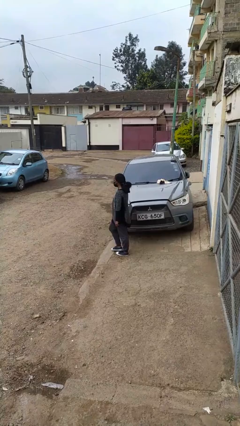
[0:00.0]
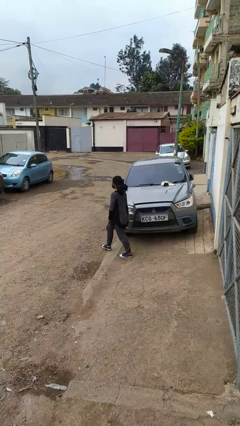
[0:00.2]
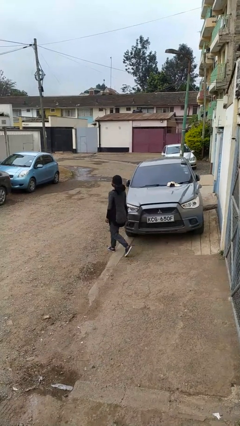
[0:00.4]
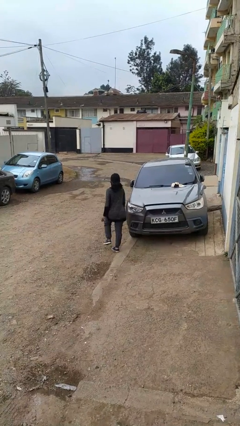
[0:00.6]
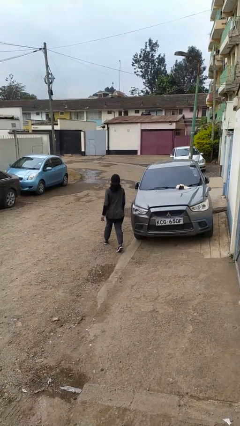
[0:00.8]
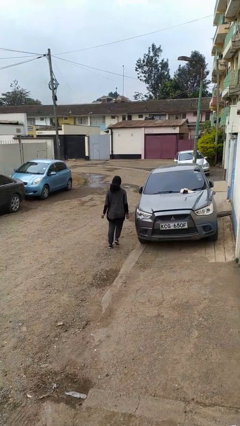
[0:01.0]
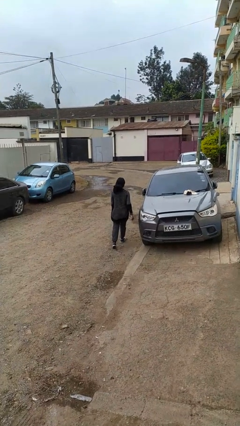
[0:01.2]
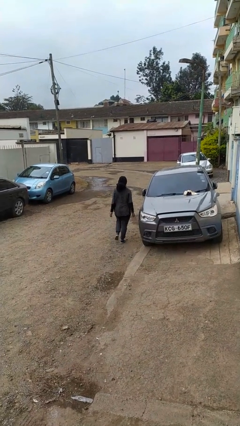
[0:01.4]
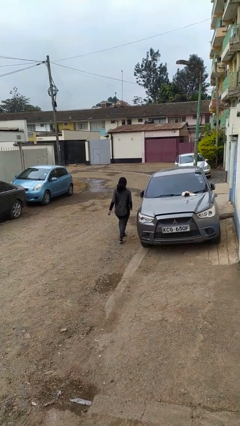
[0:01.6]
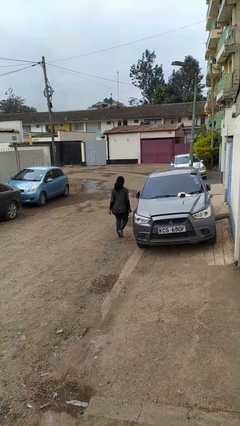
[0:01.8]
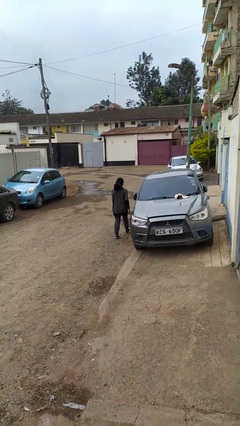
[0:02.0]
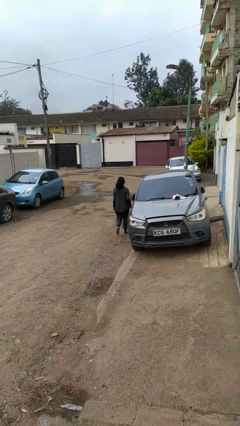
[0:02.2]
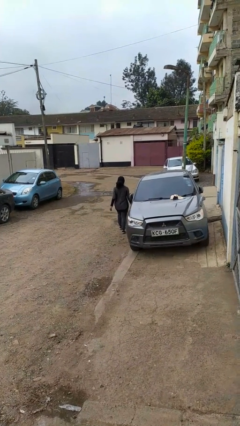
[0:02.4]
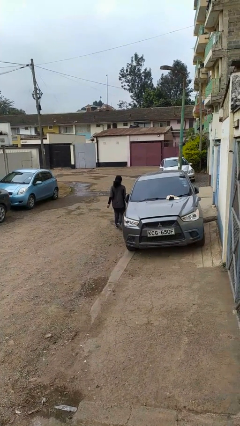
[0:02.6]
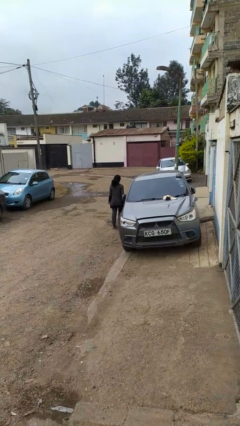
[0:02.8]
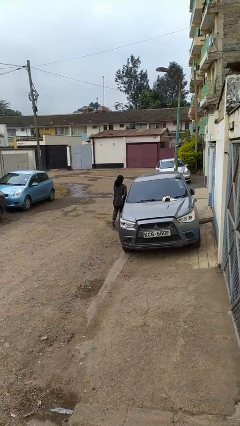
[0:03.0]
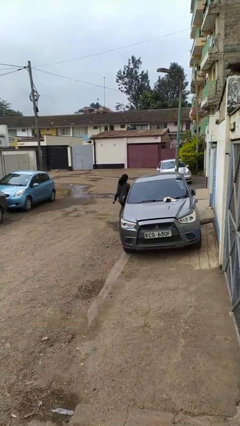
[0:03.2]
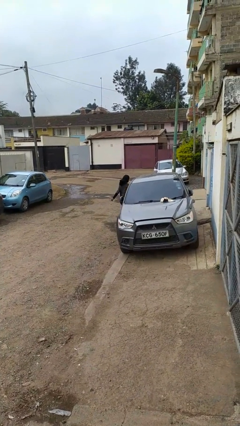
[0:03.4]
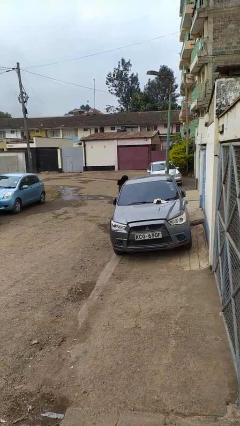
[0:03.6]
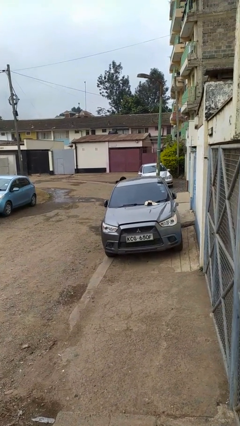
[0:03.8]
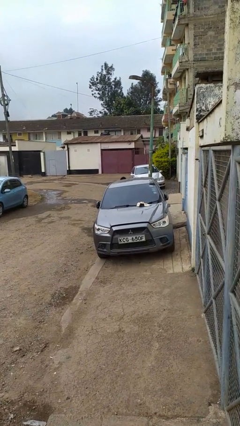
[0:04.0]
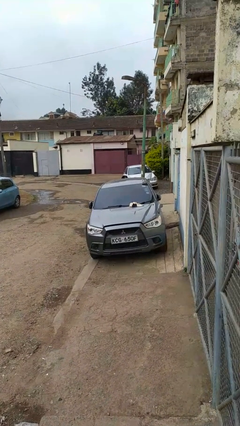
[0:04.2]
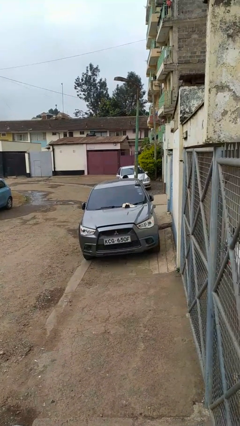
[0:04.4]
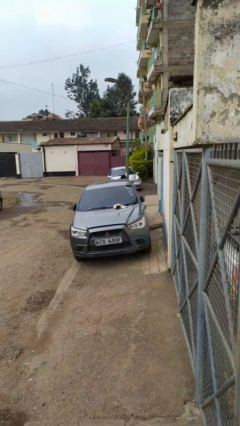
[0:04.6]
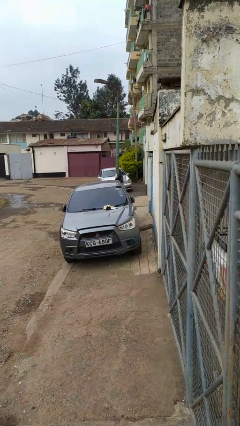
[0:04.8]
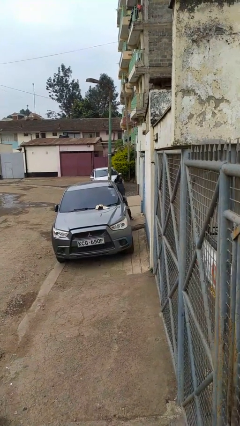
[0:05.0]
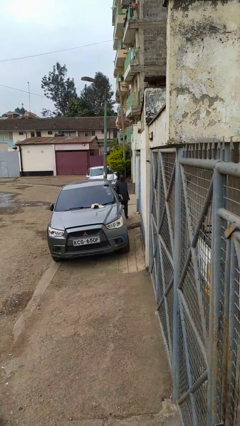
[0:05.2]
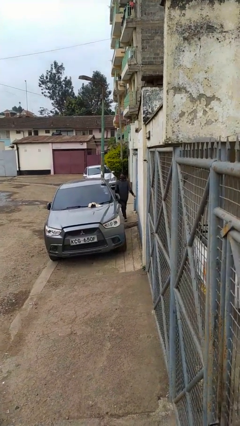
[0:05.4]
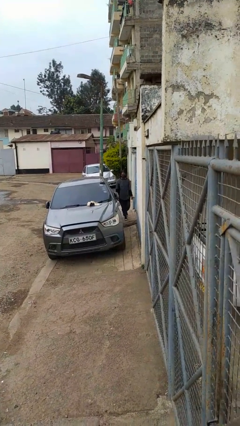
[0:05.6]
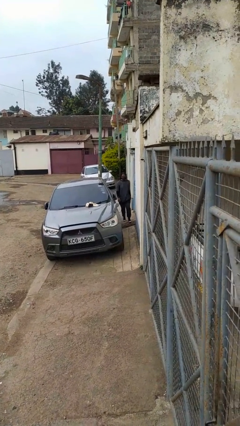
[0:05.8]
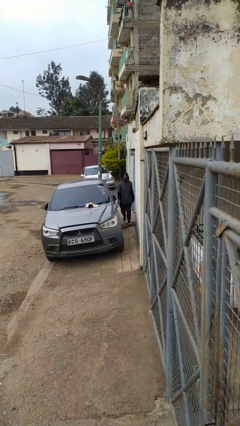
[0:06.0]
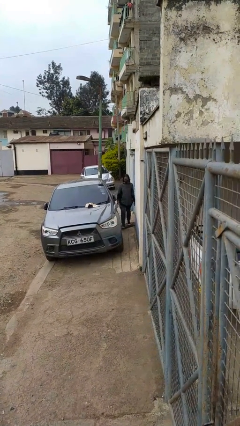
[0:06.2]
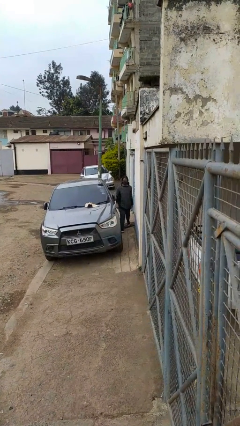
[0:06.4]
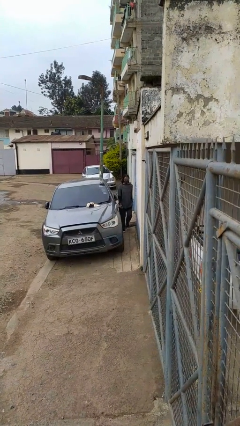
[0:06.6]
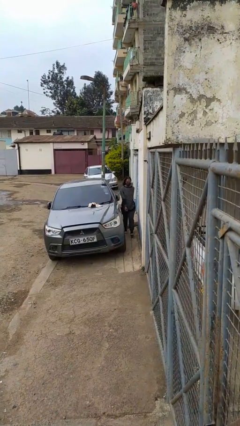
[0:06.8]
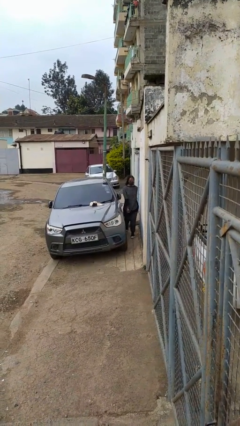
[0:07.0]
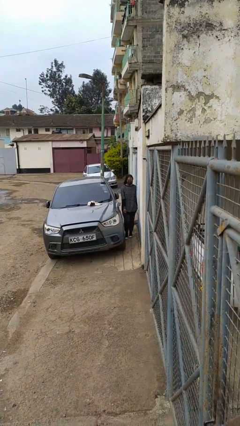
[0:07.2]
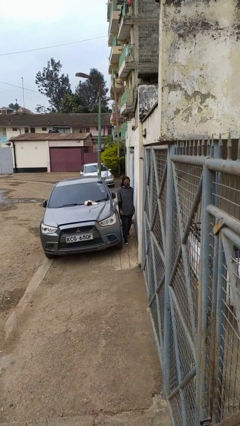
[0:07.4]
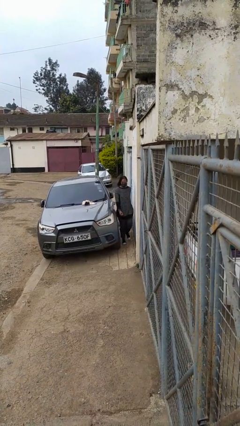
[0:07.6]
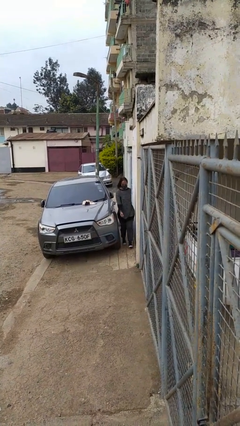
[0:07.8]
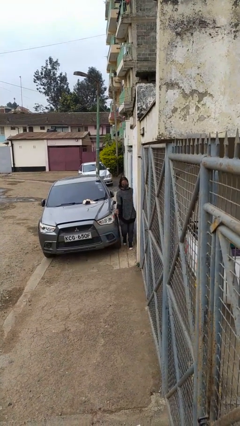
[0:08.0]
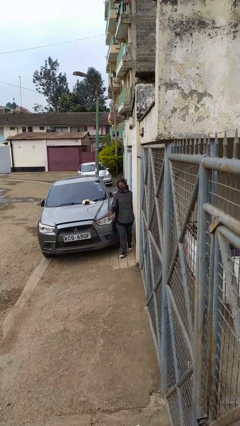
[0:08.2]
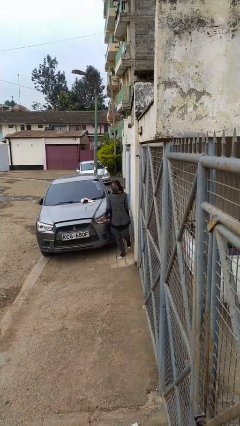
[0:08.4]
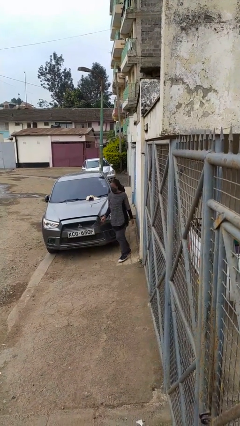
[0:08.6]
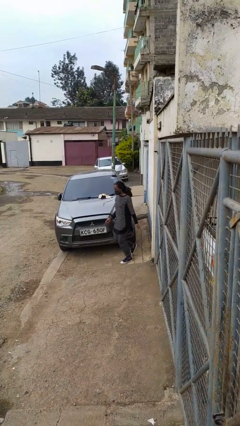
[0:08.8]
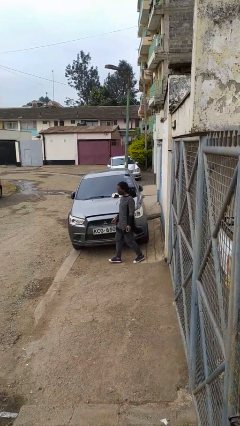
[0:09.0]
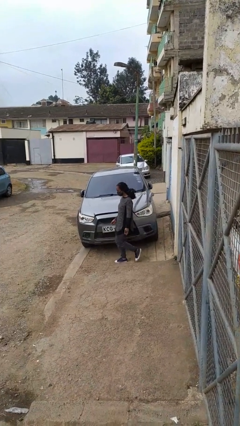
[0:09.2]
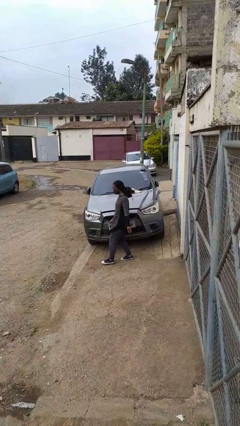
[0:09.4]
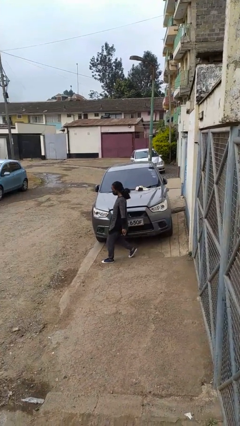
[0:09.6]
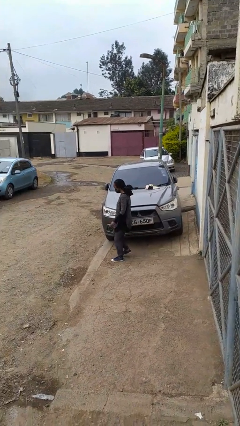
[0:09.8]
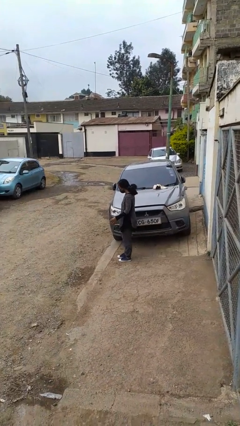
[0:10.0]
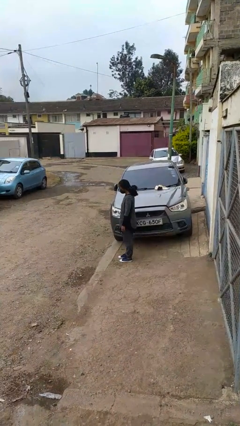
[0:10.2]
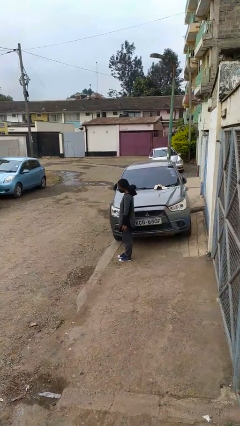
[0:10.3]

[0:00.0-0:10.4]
person walks around car

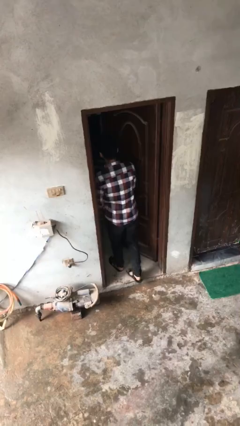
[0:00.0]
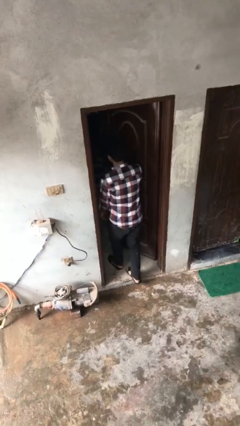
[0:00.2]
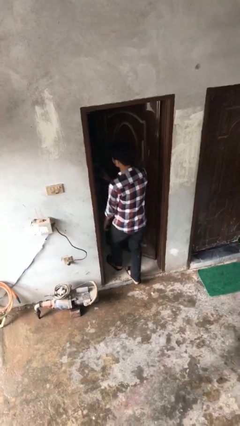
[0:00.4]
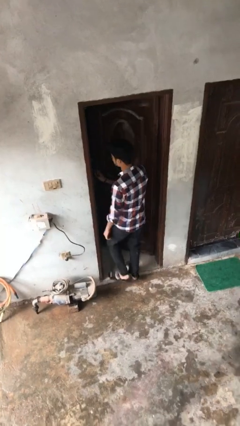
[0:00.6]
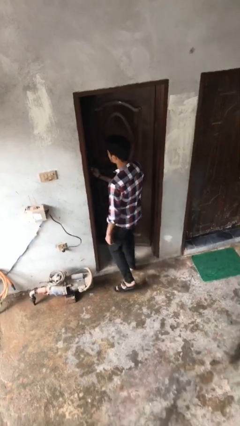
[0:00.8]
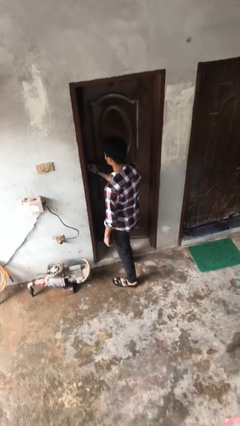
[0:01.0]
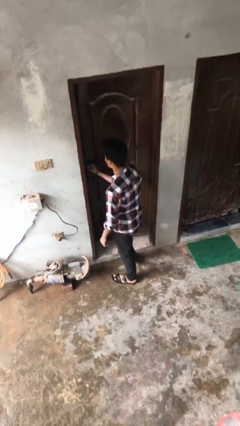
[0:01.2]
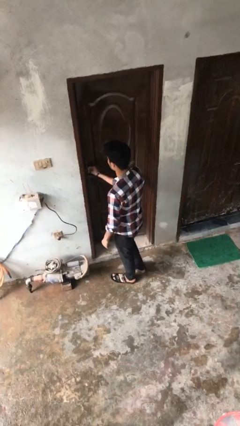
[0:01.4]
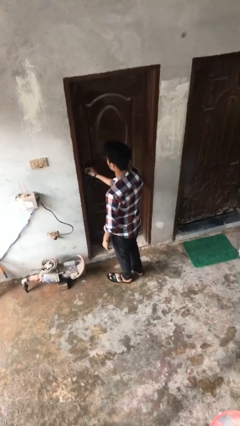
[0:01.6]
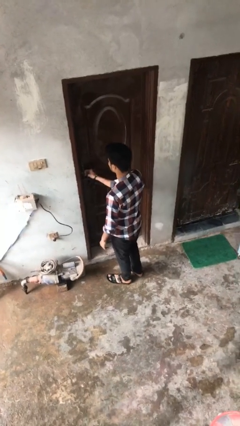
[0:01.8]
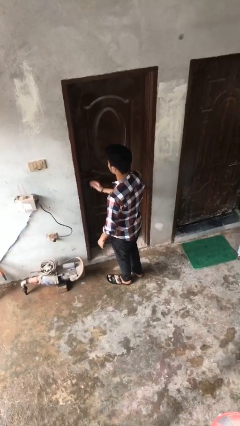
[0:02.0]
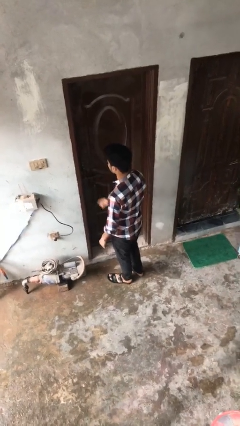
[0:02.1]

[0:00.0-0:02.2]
person closes facility door

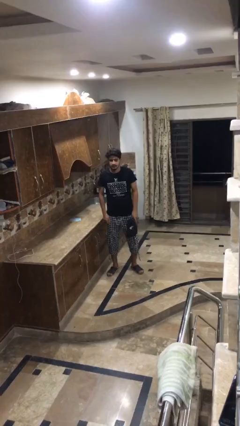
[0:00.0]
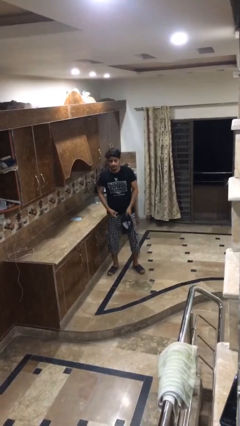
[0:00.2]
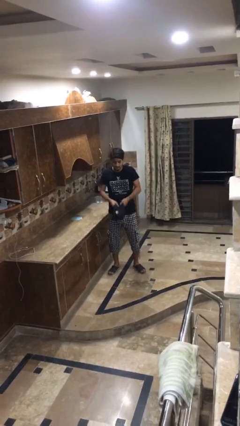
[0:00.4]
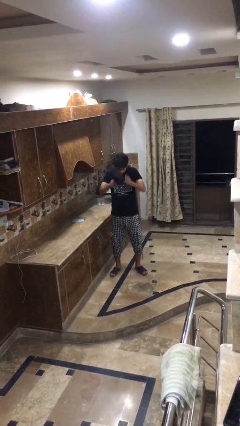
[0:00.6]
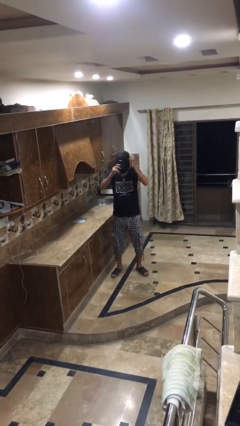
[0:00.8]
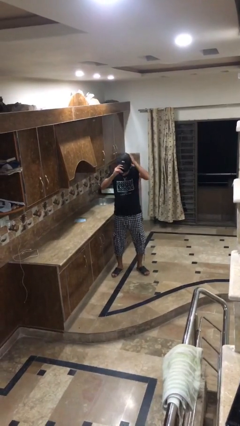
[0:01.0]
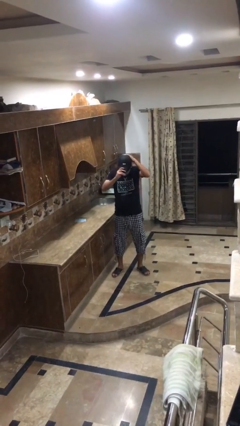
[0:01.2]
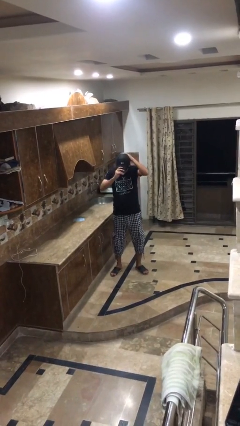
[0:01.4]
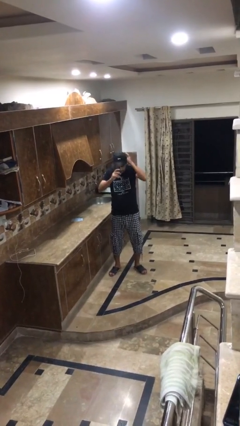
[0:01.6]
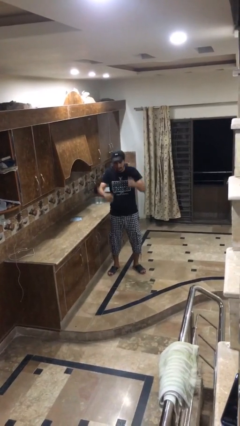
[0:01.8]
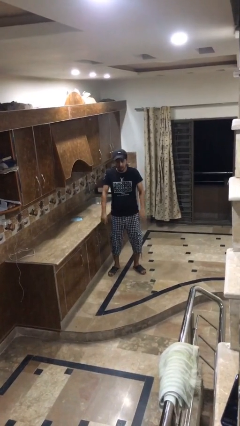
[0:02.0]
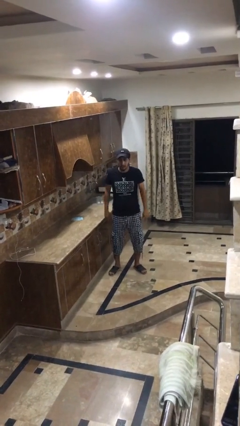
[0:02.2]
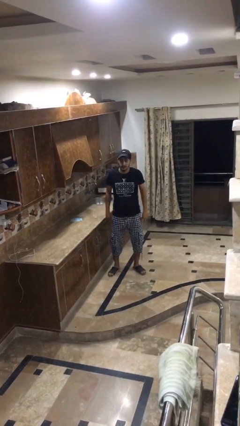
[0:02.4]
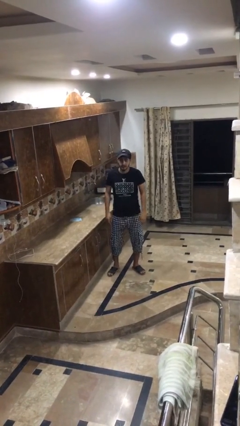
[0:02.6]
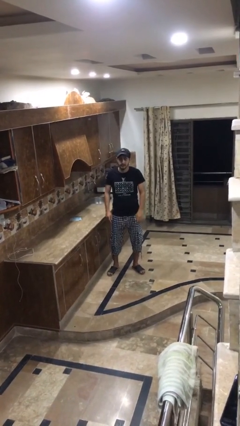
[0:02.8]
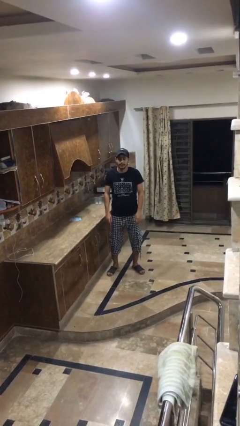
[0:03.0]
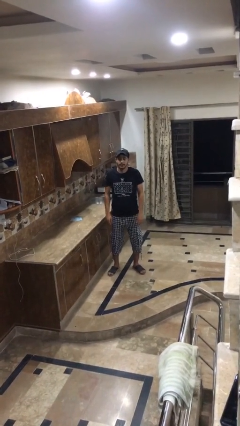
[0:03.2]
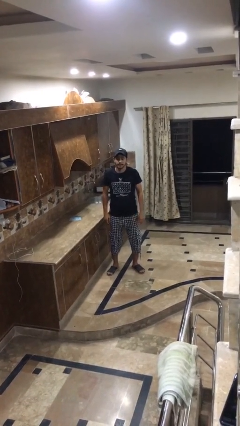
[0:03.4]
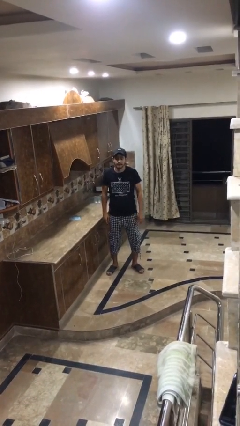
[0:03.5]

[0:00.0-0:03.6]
person puts on hat

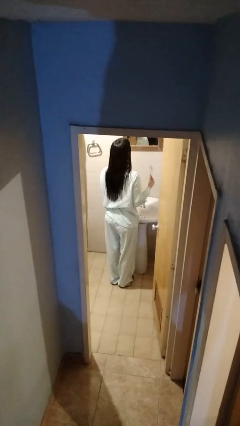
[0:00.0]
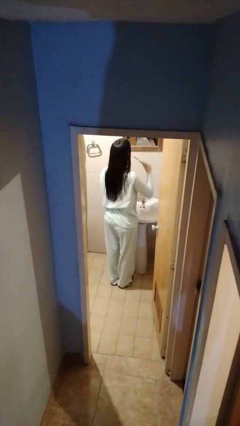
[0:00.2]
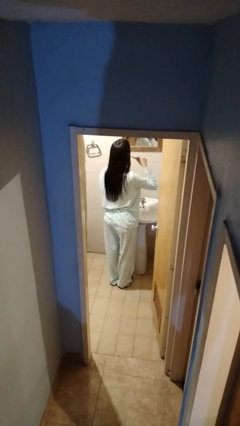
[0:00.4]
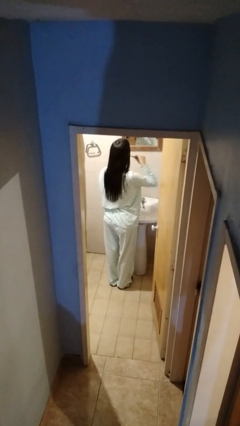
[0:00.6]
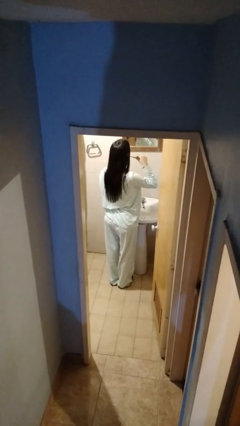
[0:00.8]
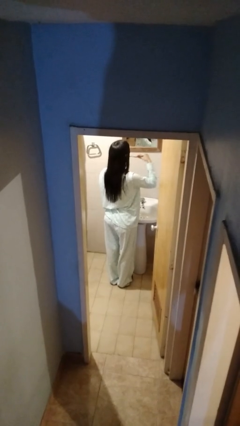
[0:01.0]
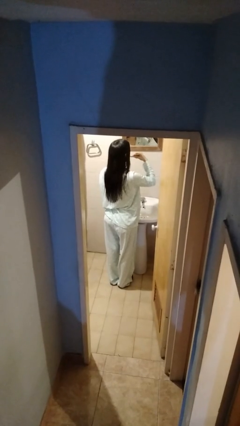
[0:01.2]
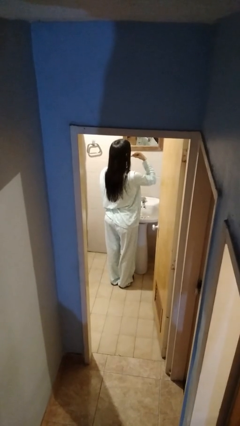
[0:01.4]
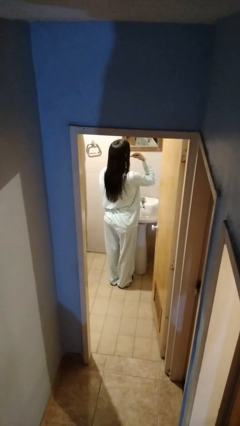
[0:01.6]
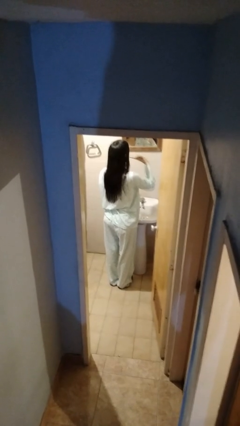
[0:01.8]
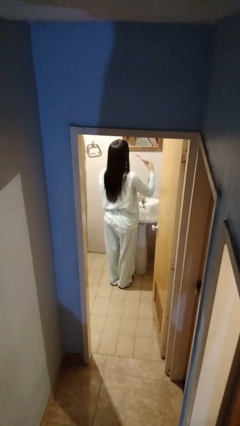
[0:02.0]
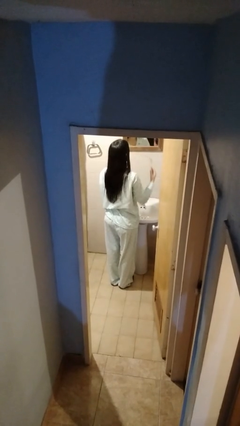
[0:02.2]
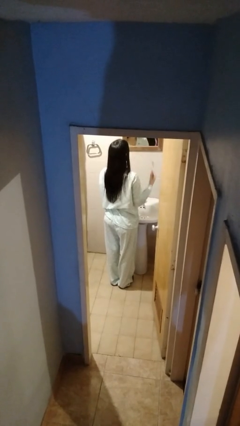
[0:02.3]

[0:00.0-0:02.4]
person brushes teeth
